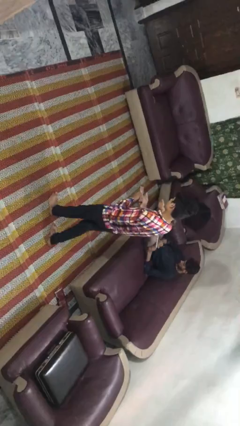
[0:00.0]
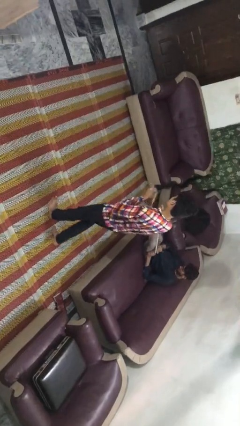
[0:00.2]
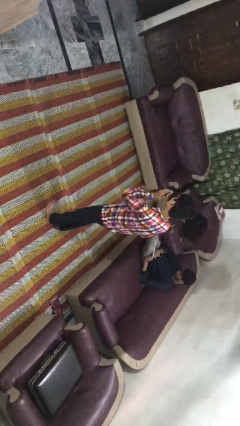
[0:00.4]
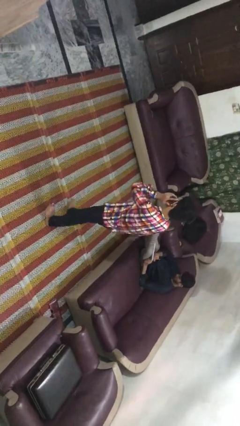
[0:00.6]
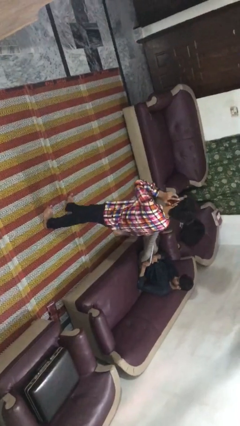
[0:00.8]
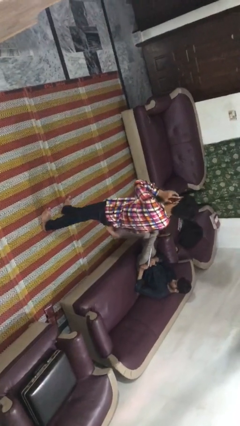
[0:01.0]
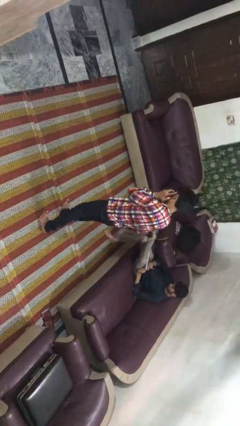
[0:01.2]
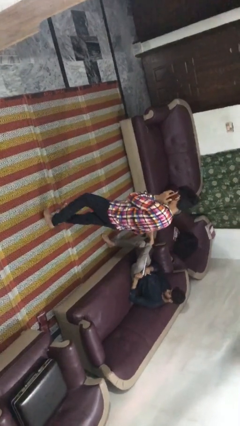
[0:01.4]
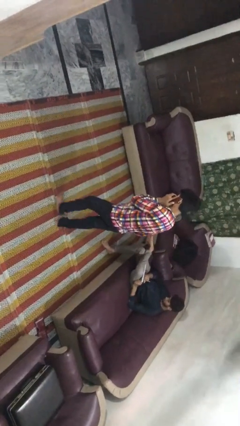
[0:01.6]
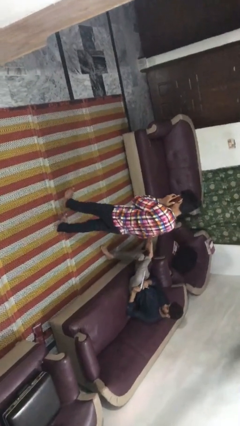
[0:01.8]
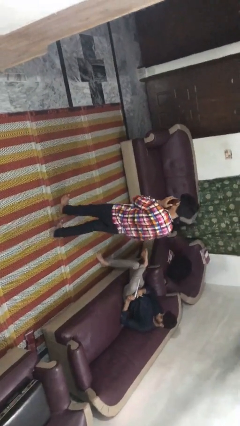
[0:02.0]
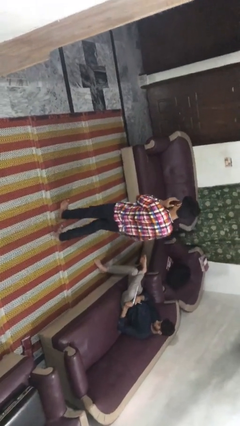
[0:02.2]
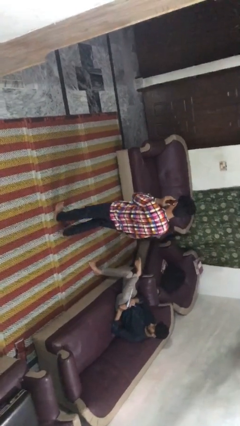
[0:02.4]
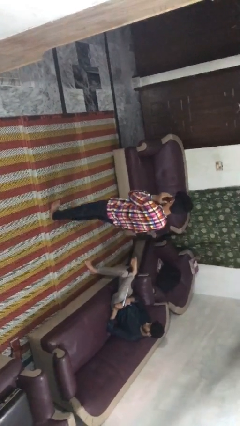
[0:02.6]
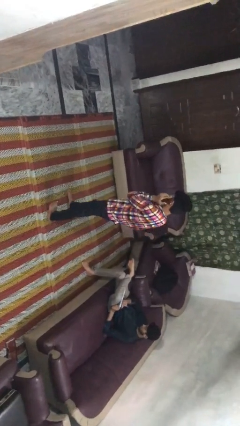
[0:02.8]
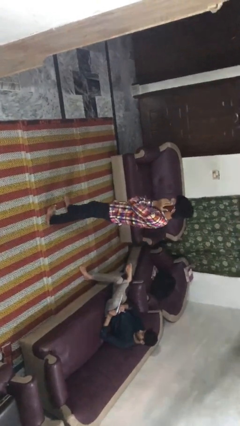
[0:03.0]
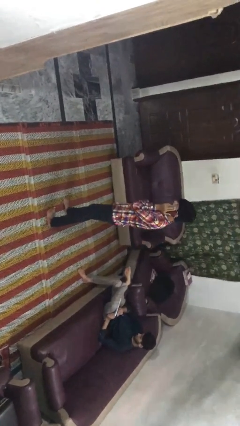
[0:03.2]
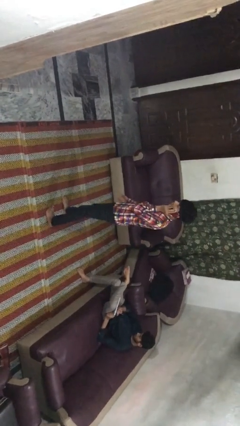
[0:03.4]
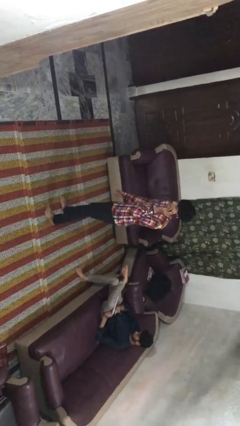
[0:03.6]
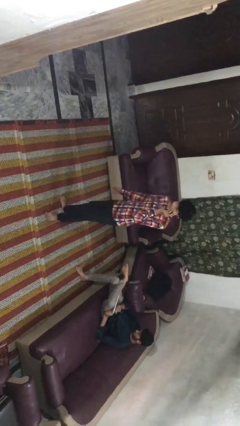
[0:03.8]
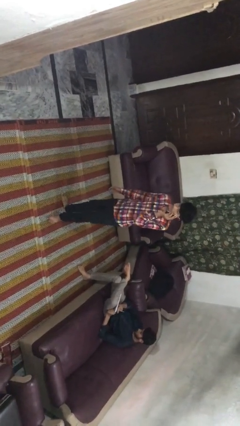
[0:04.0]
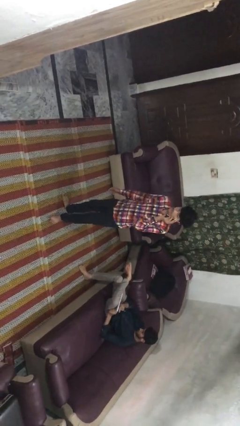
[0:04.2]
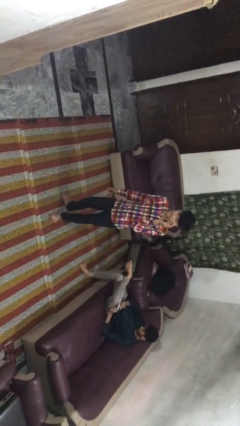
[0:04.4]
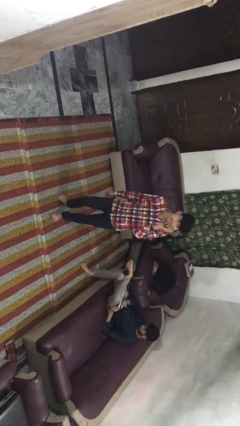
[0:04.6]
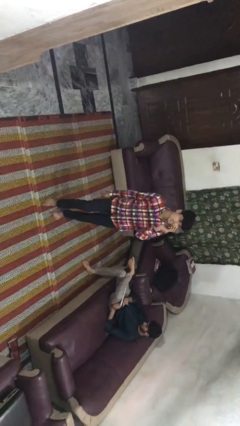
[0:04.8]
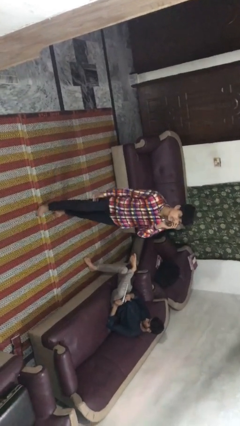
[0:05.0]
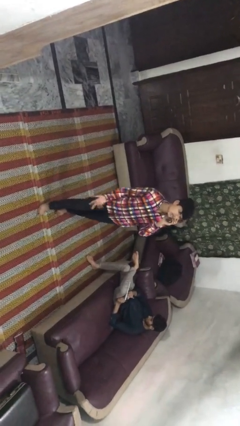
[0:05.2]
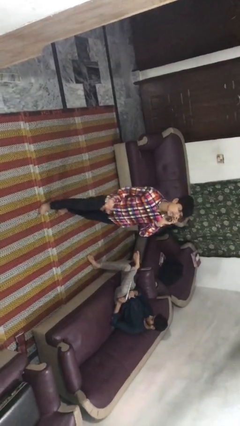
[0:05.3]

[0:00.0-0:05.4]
person talks on phone

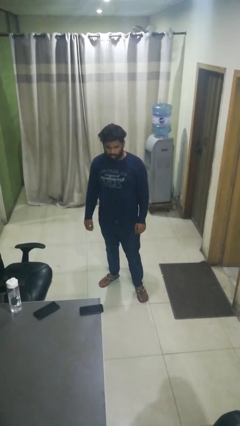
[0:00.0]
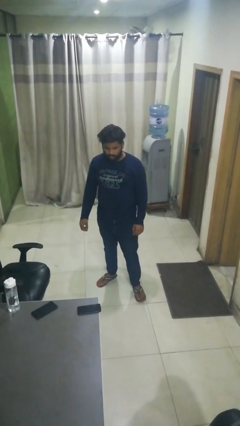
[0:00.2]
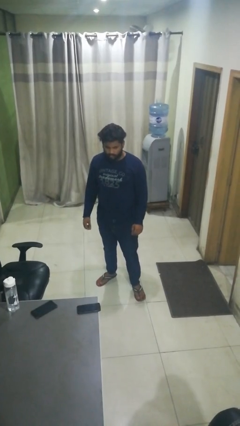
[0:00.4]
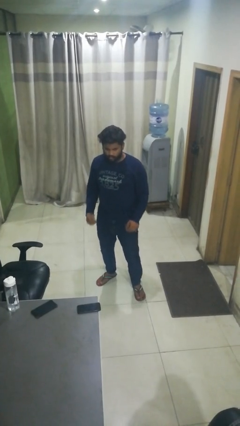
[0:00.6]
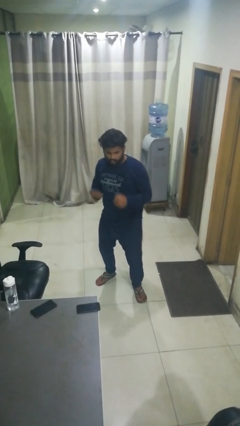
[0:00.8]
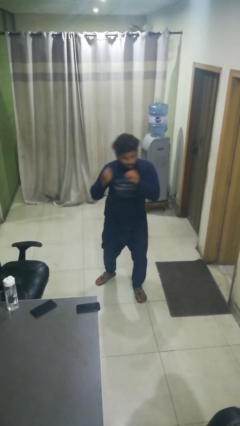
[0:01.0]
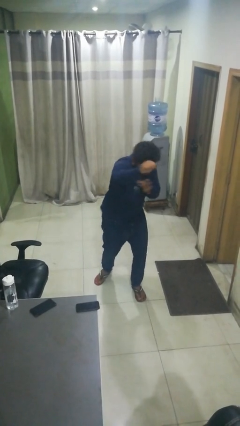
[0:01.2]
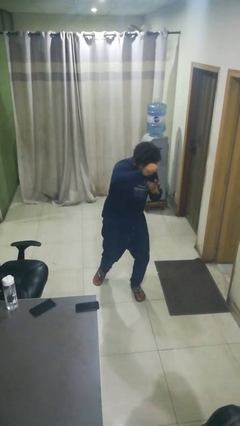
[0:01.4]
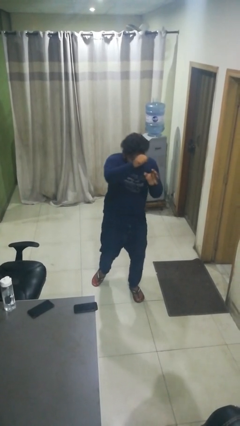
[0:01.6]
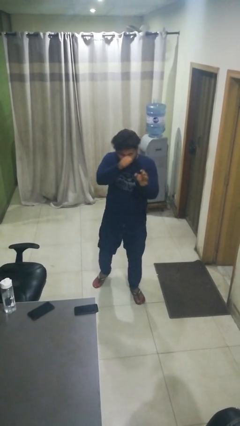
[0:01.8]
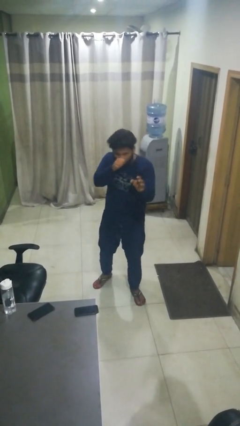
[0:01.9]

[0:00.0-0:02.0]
person punches

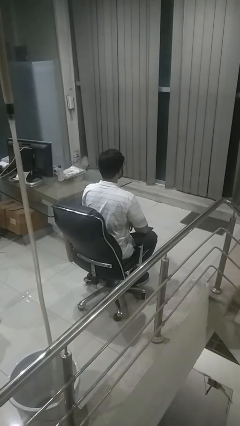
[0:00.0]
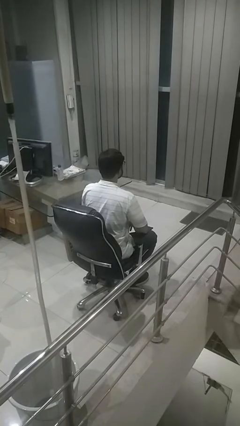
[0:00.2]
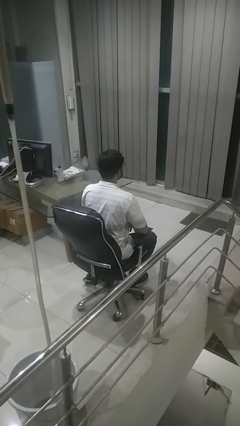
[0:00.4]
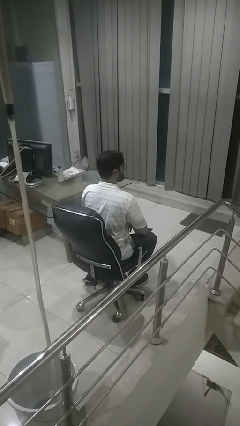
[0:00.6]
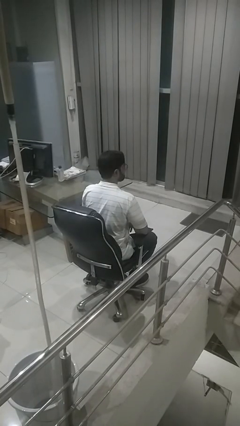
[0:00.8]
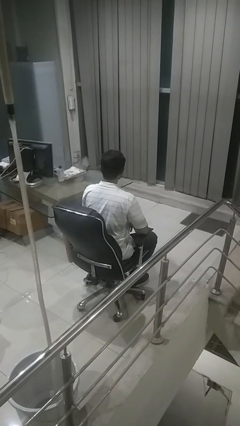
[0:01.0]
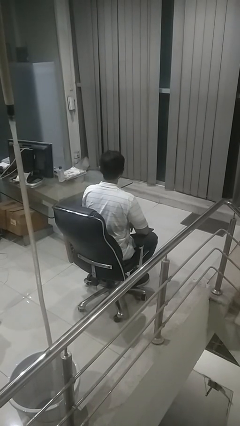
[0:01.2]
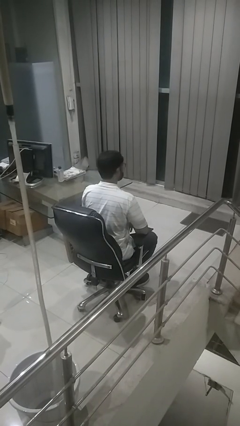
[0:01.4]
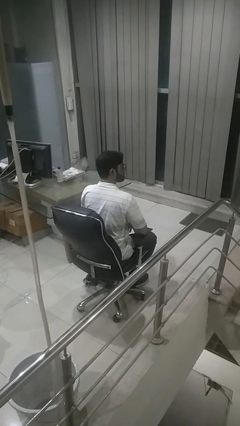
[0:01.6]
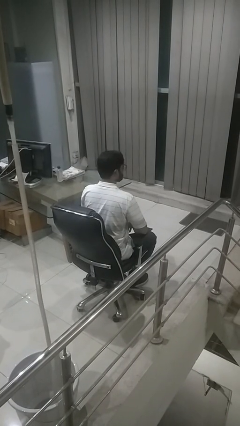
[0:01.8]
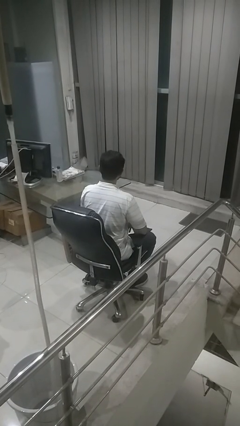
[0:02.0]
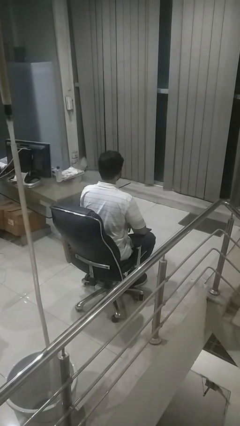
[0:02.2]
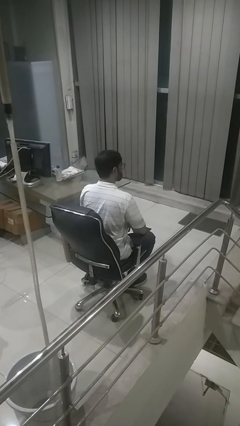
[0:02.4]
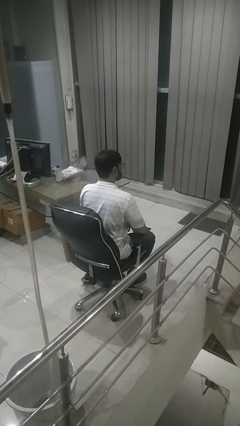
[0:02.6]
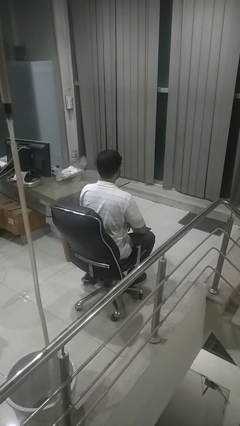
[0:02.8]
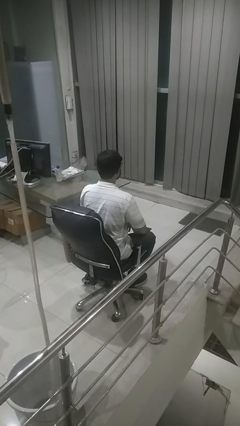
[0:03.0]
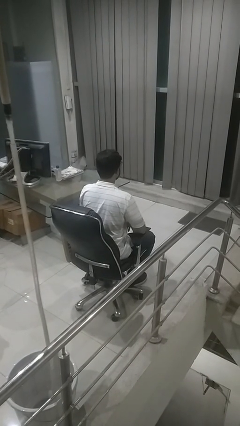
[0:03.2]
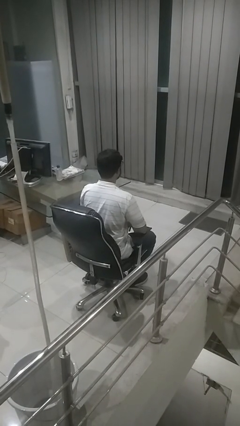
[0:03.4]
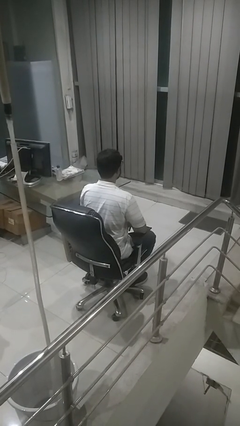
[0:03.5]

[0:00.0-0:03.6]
person shakes head

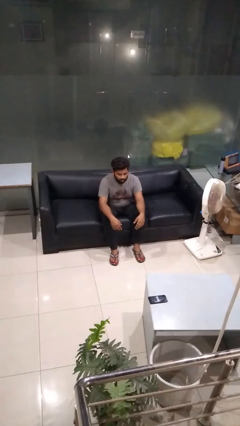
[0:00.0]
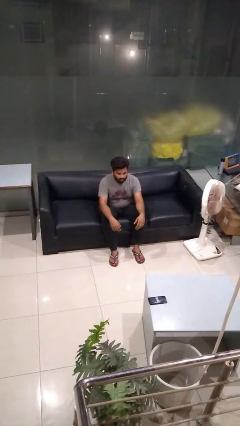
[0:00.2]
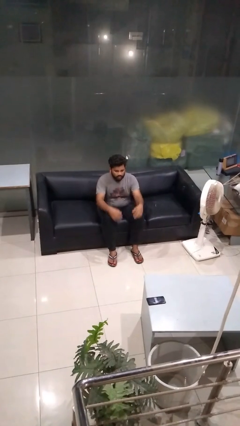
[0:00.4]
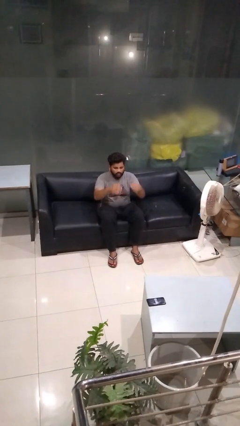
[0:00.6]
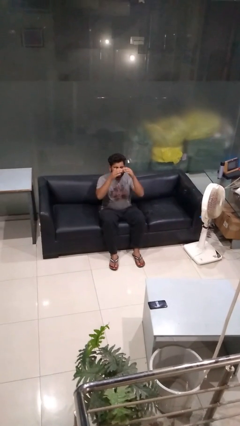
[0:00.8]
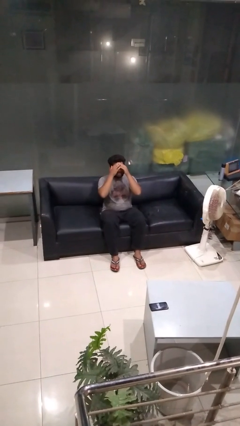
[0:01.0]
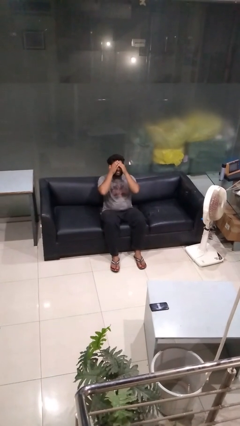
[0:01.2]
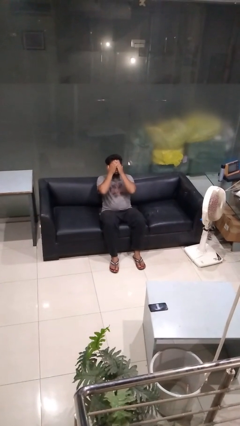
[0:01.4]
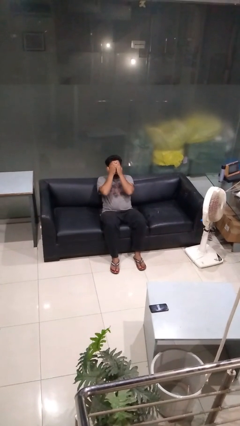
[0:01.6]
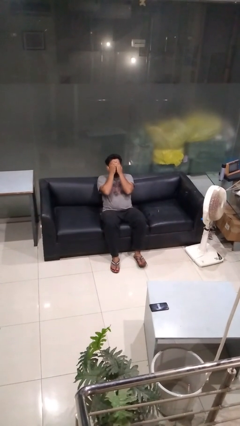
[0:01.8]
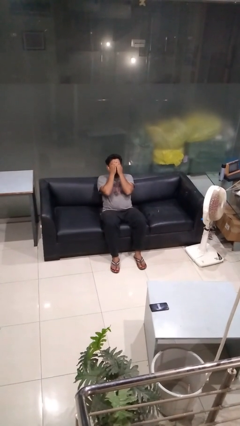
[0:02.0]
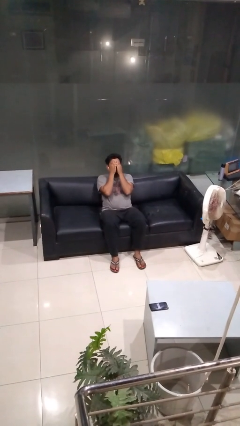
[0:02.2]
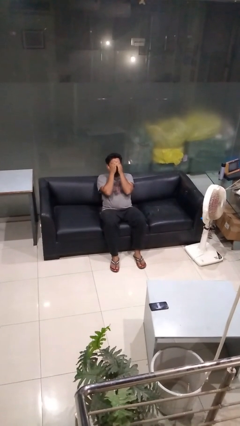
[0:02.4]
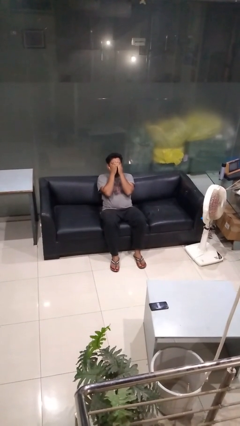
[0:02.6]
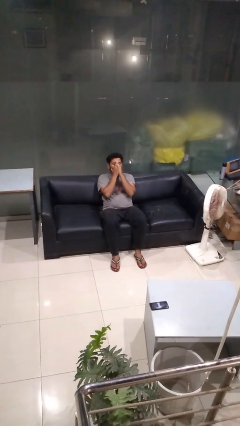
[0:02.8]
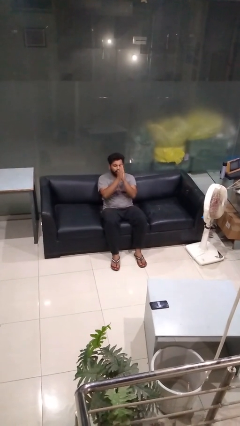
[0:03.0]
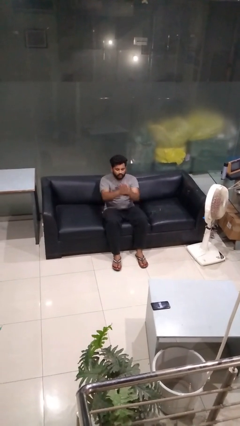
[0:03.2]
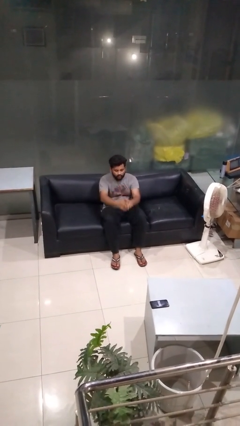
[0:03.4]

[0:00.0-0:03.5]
person covers face with hands

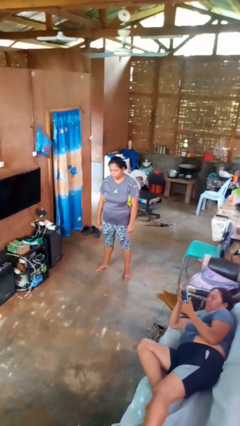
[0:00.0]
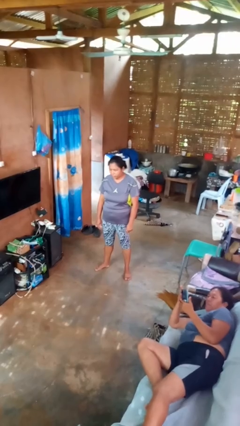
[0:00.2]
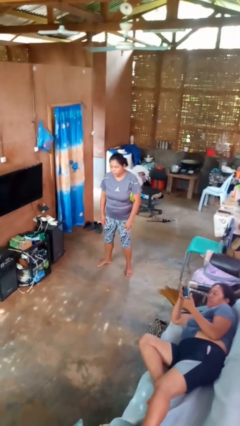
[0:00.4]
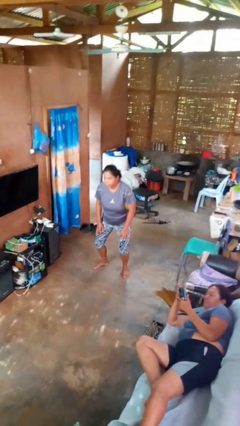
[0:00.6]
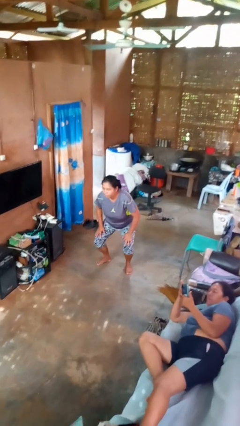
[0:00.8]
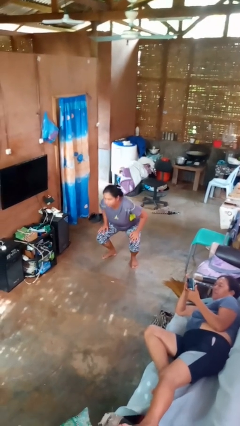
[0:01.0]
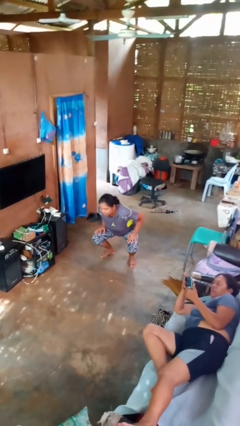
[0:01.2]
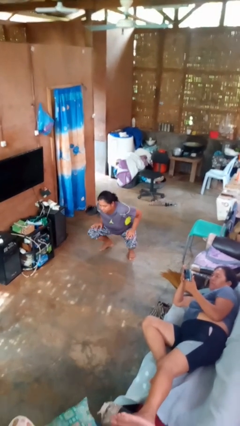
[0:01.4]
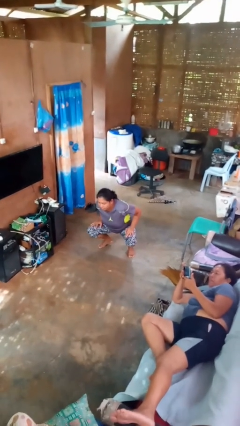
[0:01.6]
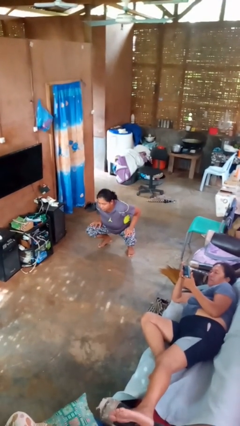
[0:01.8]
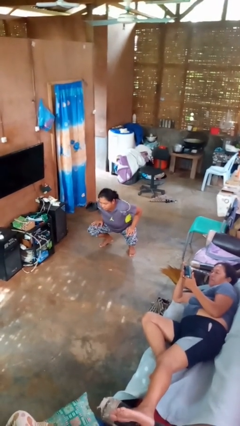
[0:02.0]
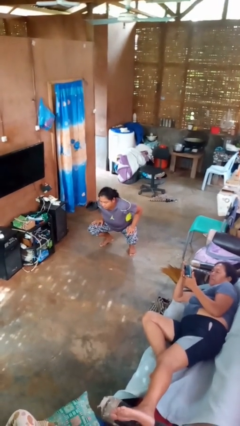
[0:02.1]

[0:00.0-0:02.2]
person squats

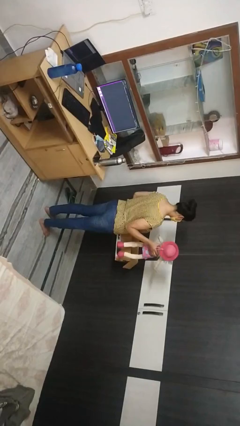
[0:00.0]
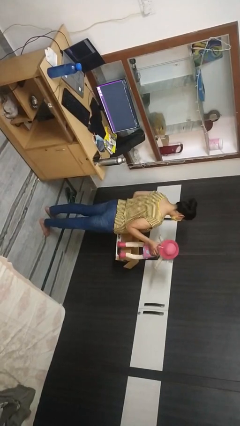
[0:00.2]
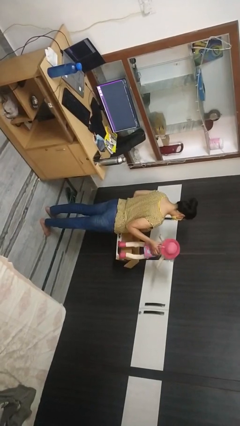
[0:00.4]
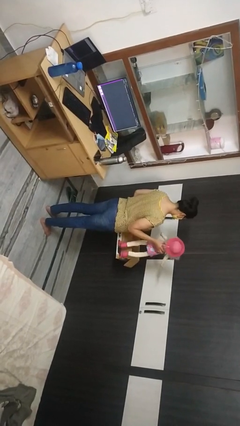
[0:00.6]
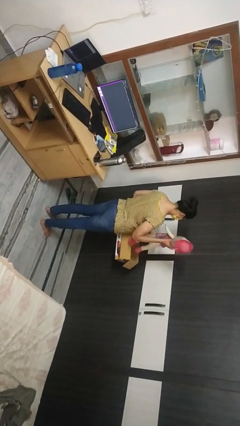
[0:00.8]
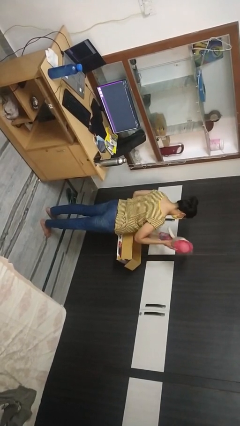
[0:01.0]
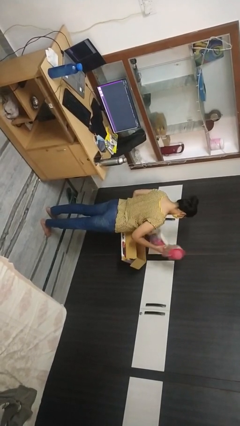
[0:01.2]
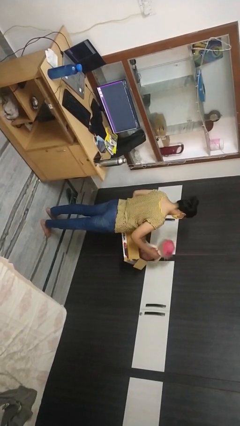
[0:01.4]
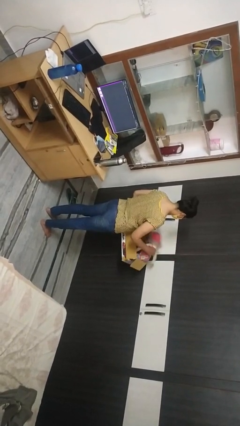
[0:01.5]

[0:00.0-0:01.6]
person puts object into box
